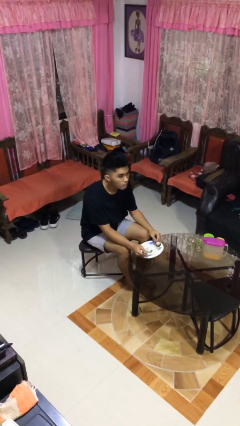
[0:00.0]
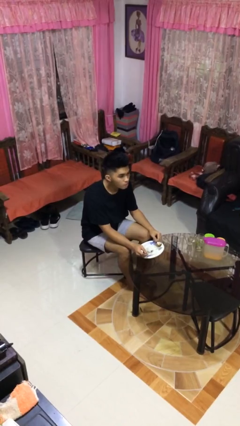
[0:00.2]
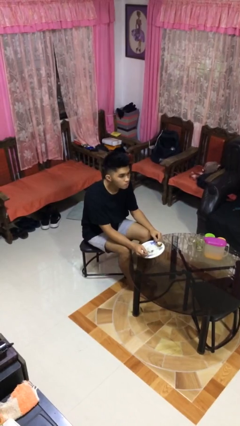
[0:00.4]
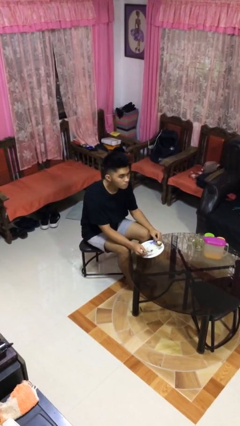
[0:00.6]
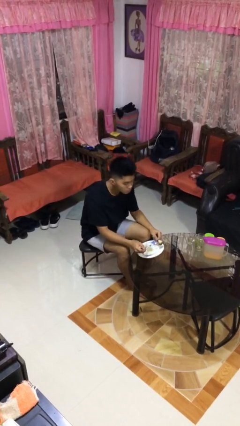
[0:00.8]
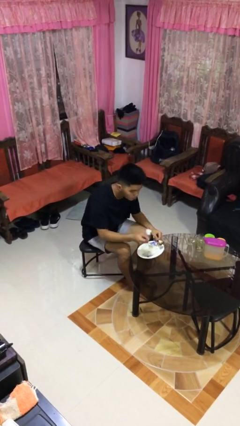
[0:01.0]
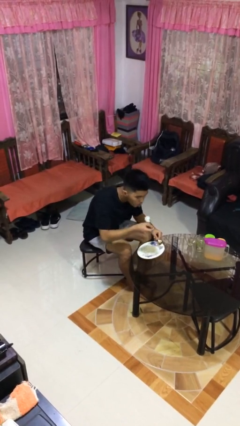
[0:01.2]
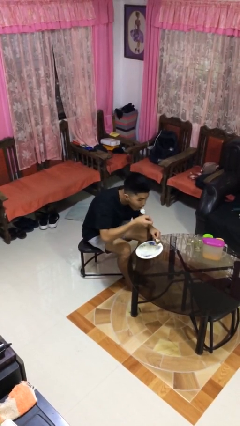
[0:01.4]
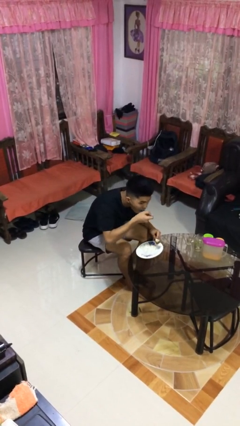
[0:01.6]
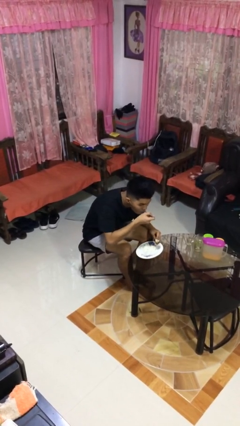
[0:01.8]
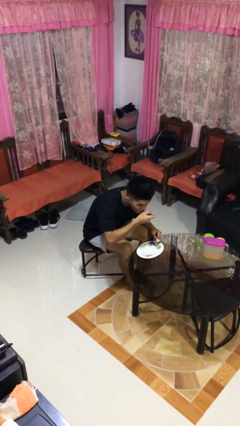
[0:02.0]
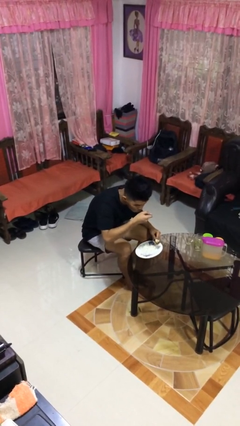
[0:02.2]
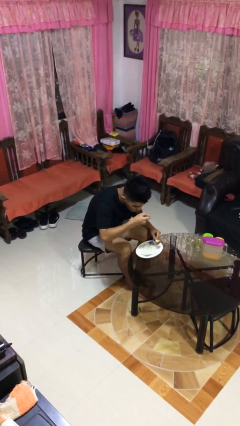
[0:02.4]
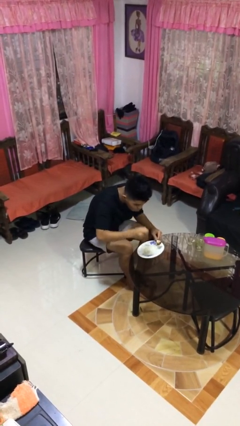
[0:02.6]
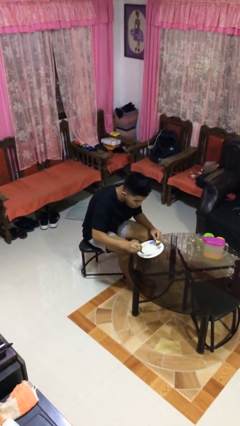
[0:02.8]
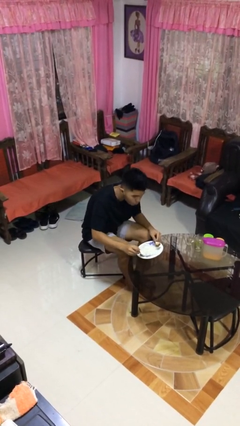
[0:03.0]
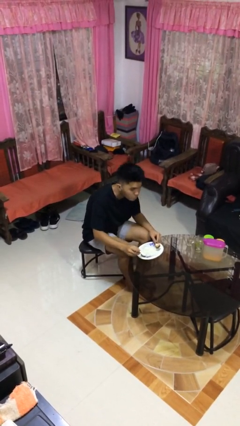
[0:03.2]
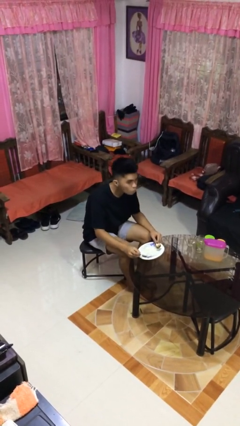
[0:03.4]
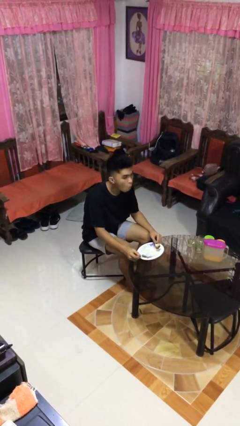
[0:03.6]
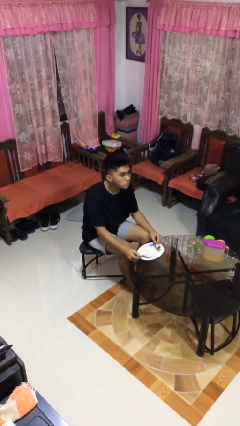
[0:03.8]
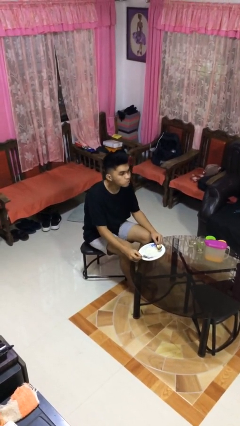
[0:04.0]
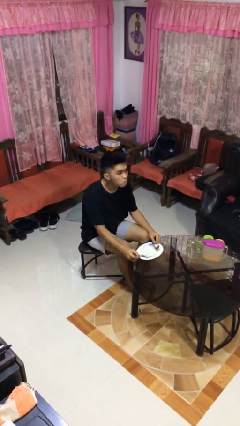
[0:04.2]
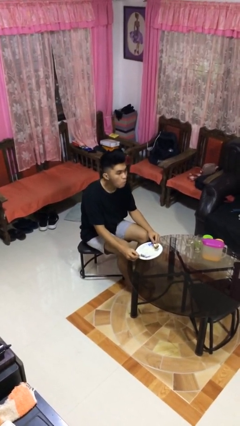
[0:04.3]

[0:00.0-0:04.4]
person eats with utensil

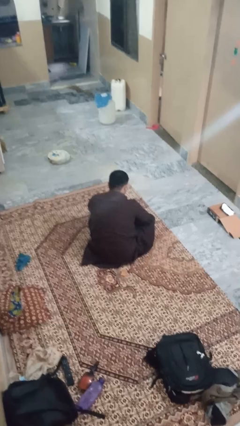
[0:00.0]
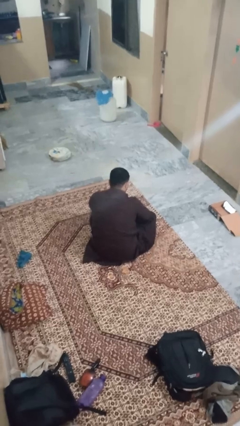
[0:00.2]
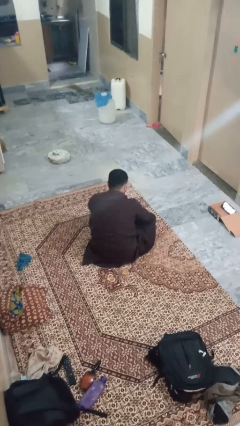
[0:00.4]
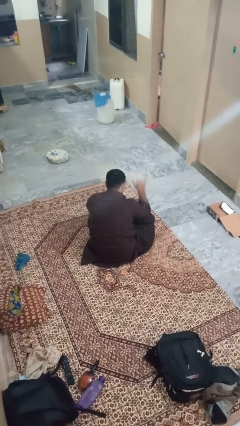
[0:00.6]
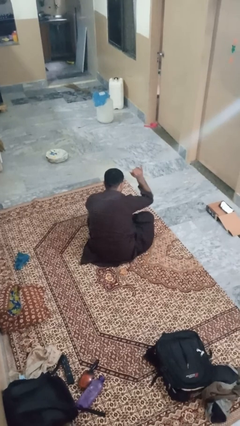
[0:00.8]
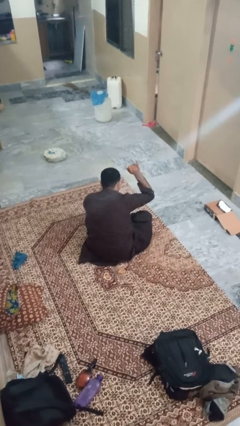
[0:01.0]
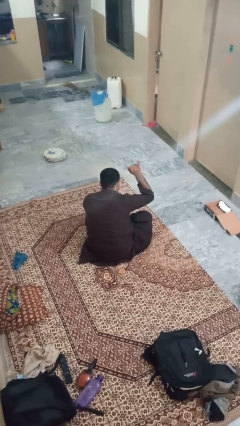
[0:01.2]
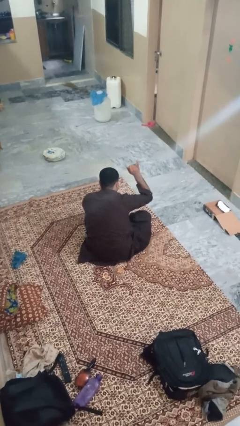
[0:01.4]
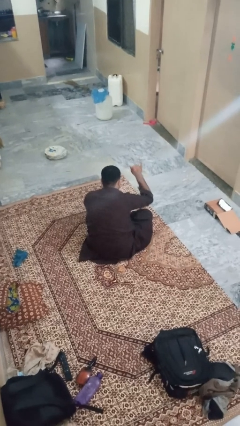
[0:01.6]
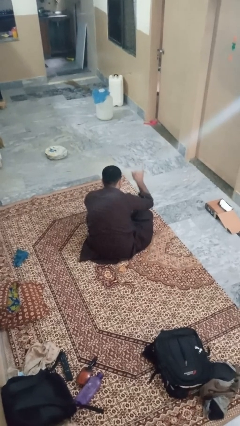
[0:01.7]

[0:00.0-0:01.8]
person gestures hang loose

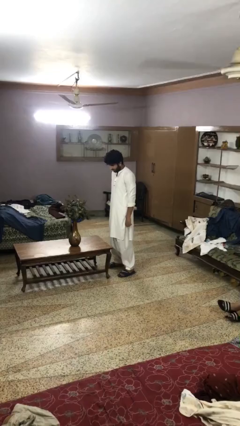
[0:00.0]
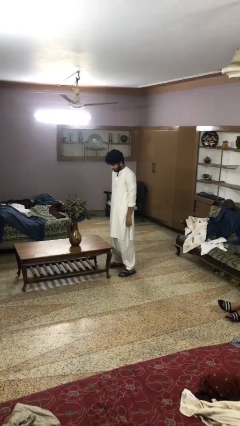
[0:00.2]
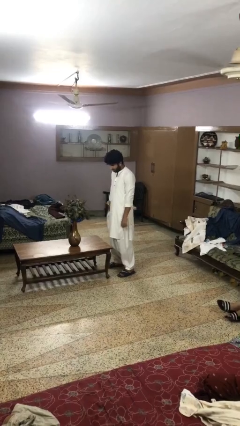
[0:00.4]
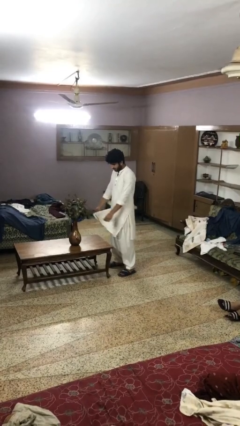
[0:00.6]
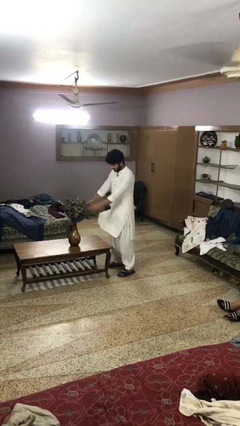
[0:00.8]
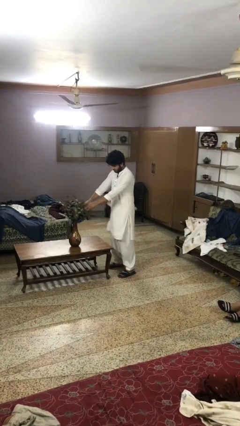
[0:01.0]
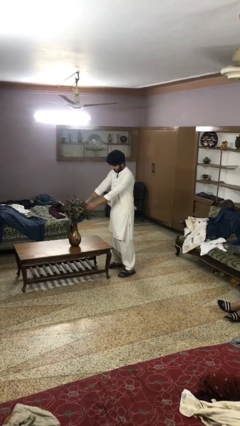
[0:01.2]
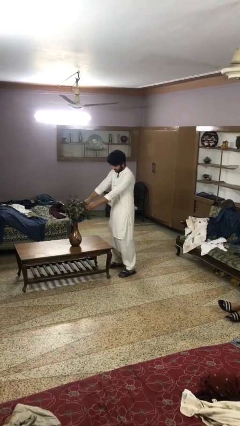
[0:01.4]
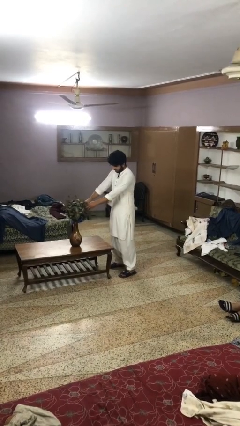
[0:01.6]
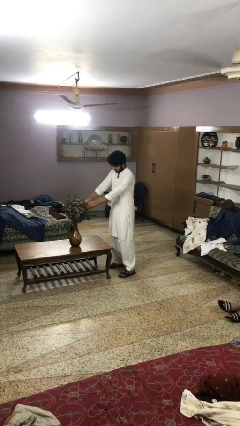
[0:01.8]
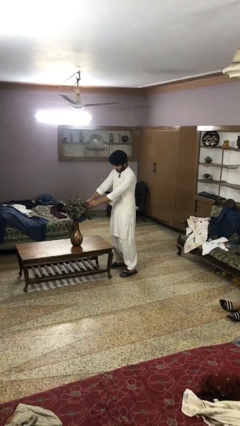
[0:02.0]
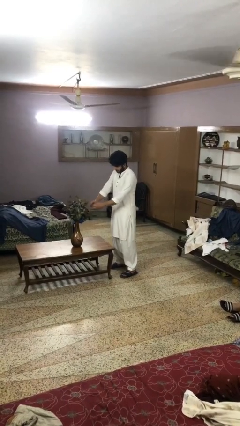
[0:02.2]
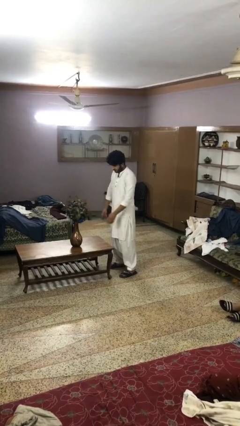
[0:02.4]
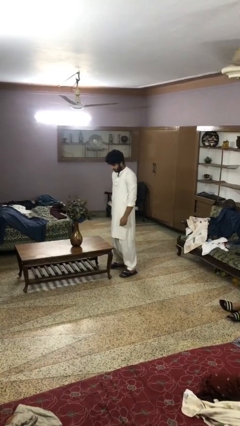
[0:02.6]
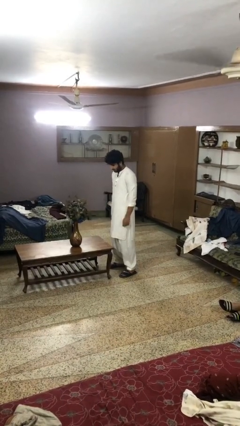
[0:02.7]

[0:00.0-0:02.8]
person arranges flowers in vase

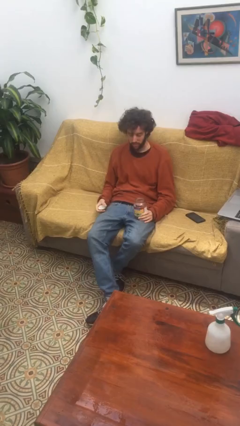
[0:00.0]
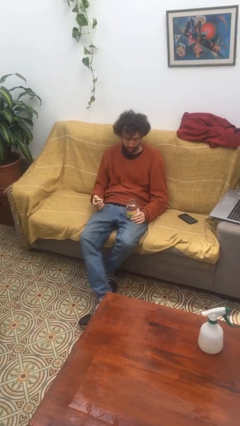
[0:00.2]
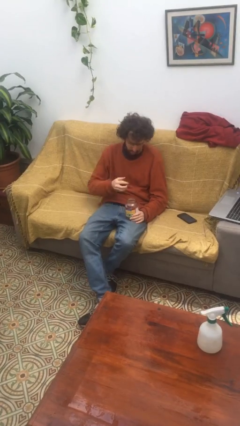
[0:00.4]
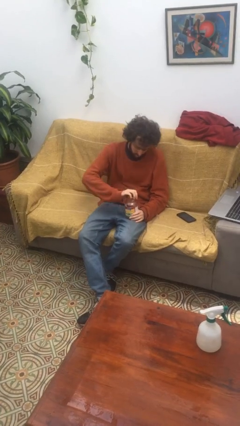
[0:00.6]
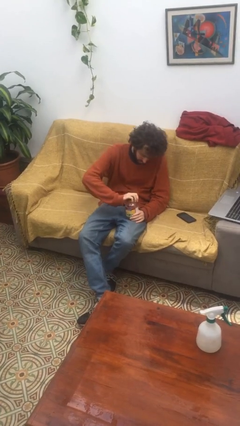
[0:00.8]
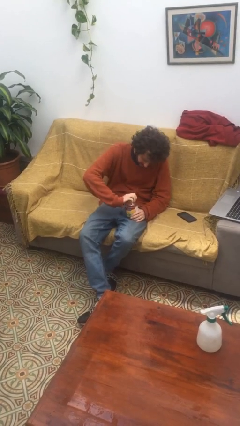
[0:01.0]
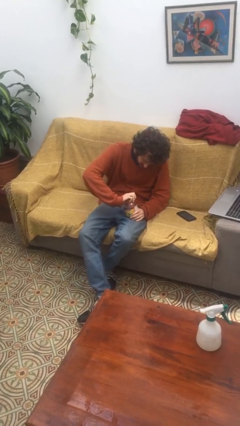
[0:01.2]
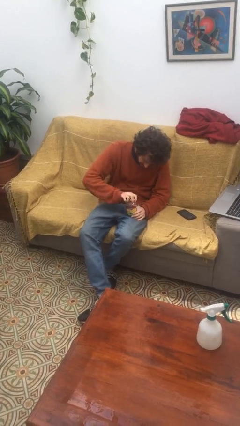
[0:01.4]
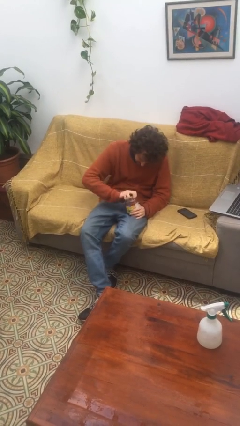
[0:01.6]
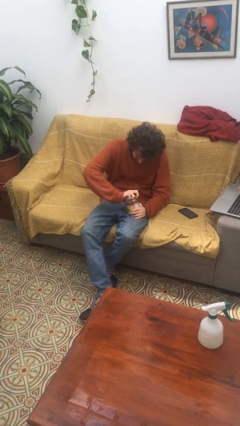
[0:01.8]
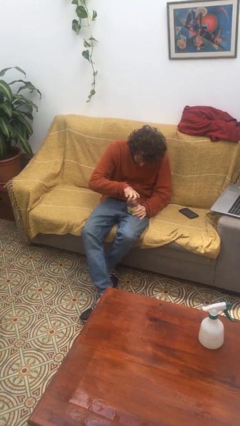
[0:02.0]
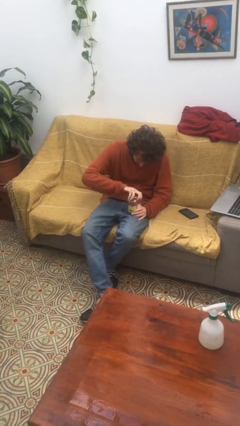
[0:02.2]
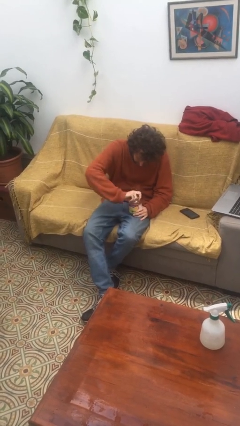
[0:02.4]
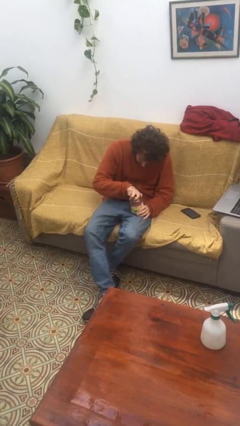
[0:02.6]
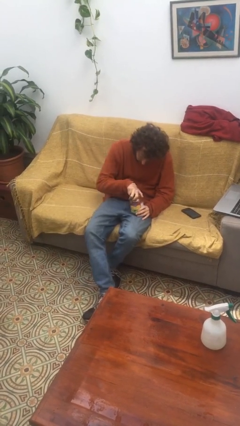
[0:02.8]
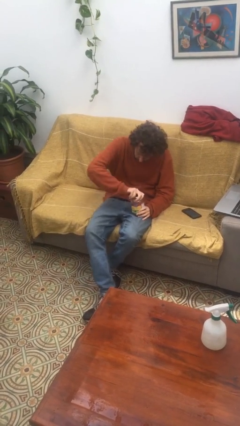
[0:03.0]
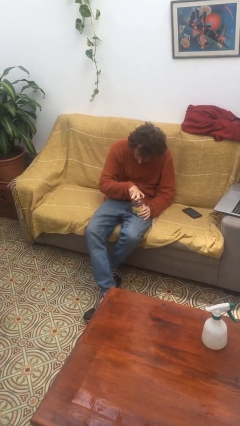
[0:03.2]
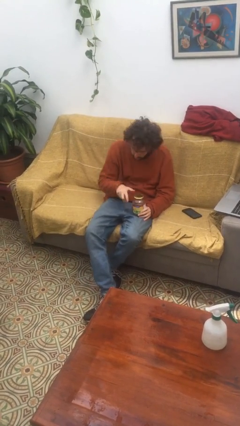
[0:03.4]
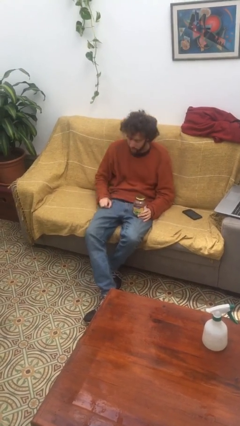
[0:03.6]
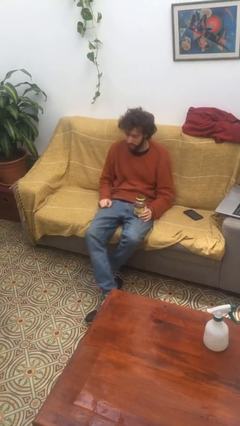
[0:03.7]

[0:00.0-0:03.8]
person closes jar

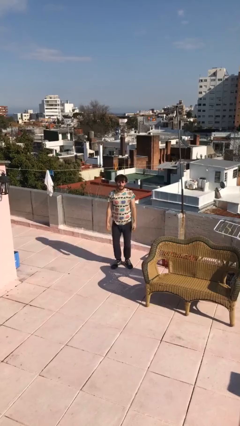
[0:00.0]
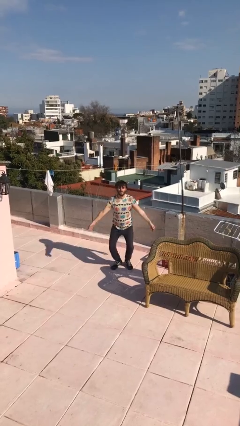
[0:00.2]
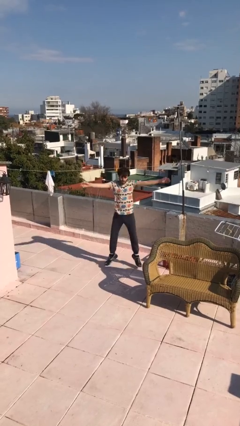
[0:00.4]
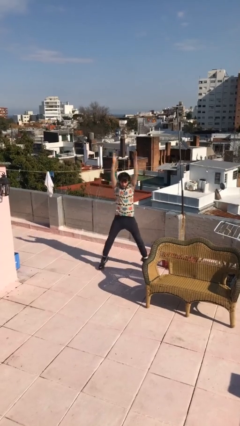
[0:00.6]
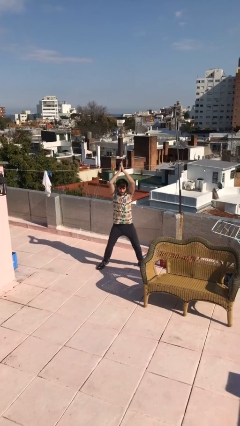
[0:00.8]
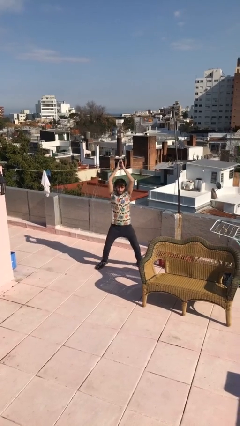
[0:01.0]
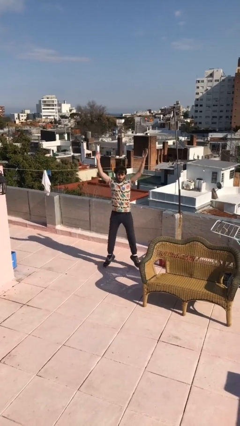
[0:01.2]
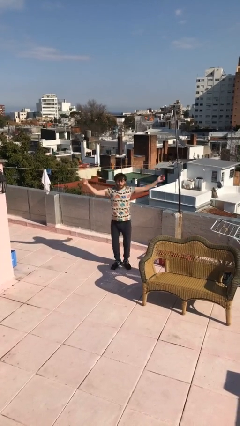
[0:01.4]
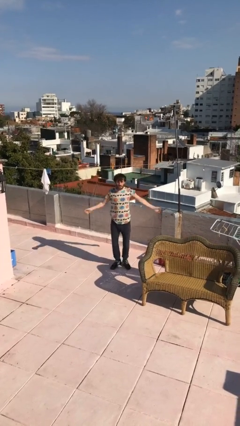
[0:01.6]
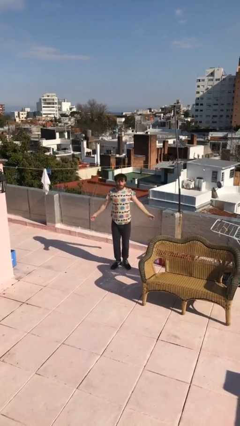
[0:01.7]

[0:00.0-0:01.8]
person exercises with jumping jacks

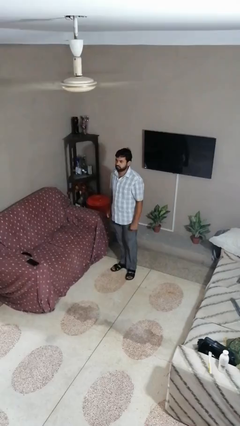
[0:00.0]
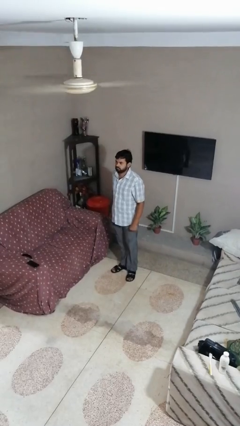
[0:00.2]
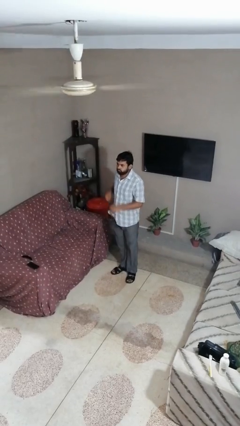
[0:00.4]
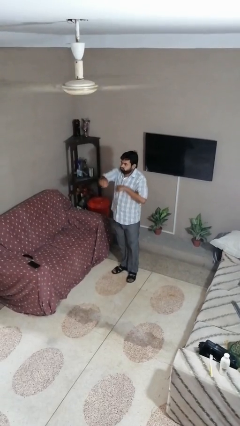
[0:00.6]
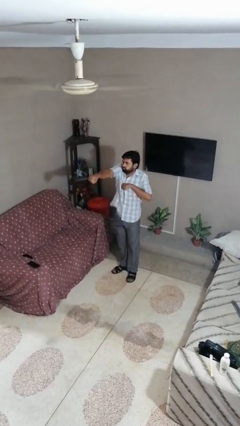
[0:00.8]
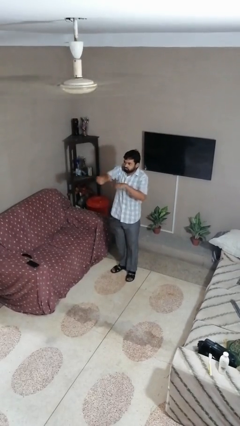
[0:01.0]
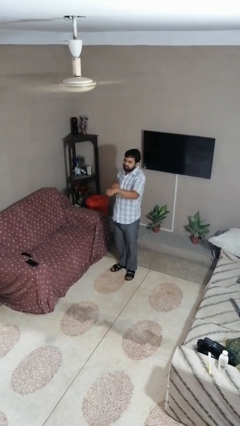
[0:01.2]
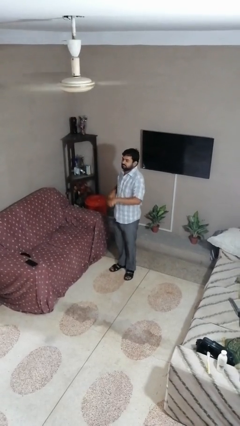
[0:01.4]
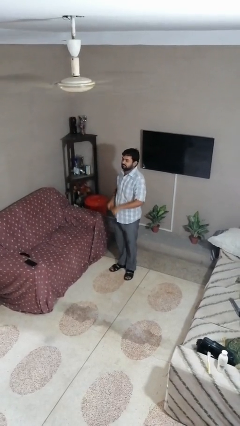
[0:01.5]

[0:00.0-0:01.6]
person karate chop

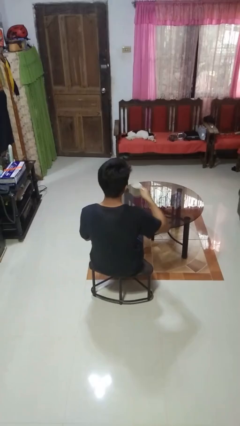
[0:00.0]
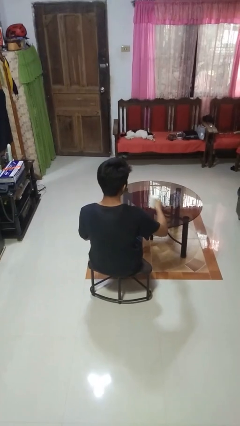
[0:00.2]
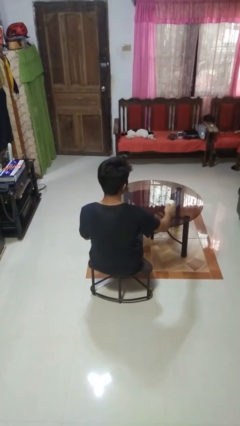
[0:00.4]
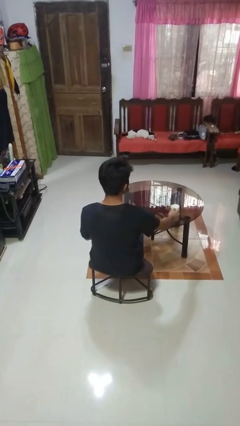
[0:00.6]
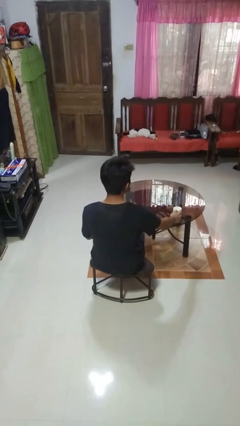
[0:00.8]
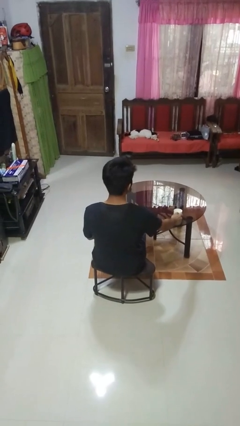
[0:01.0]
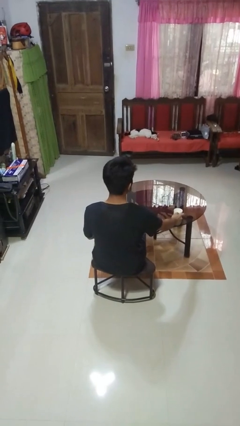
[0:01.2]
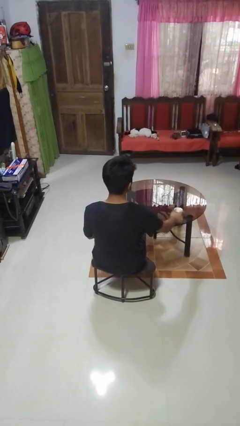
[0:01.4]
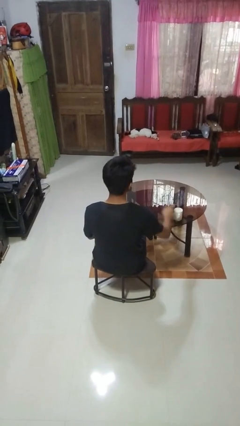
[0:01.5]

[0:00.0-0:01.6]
person puts down object on table
